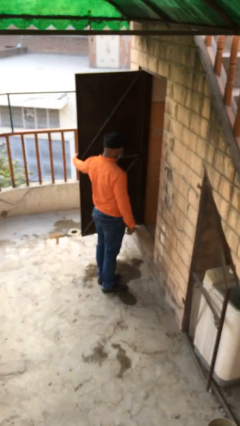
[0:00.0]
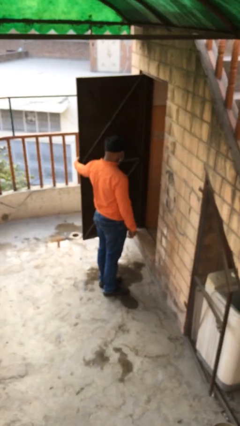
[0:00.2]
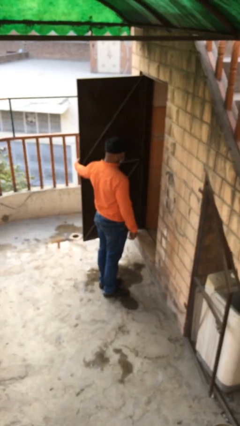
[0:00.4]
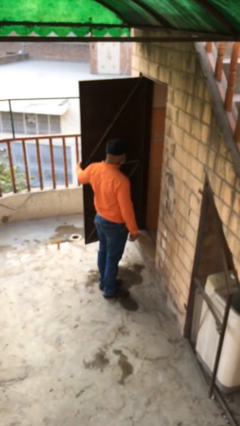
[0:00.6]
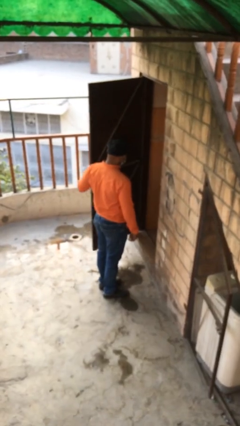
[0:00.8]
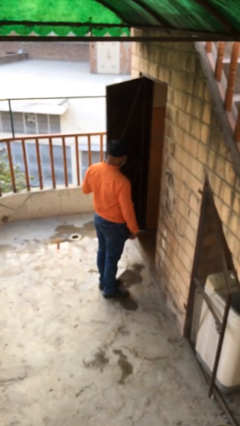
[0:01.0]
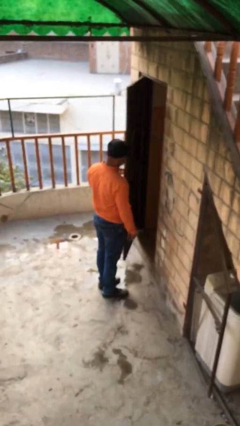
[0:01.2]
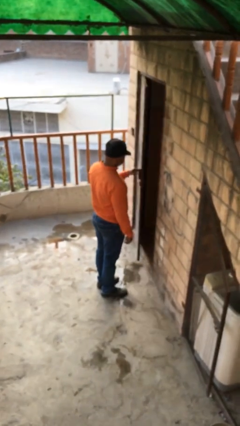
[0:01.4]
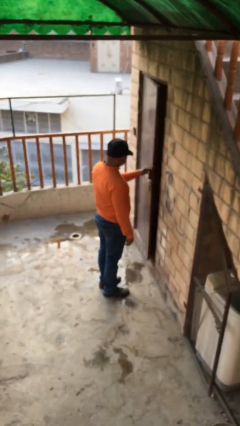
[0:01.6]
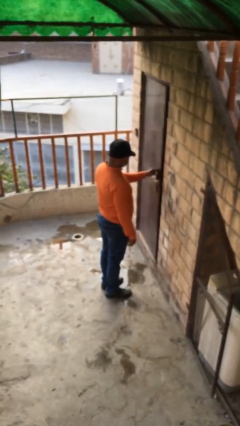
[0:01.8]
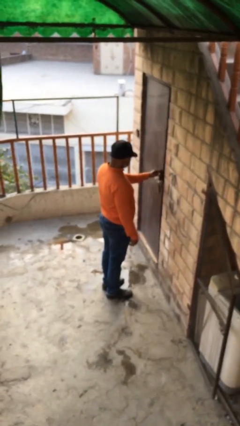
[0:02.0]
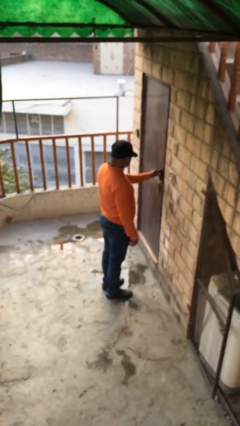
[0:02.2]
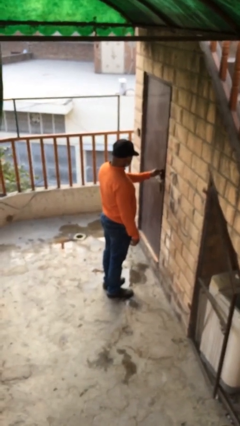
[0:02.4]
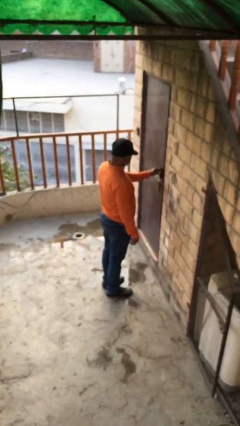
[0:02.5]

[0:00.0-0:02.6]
person closes facility door

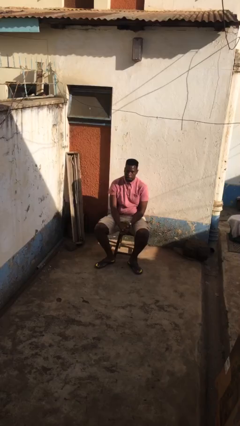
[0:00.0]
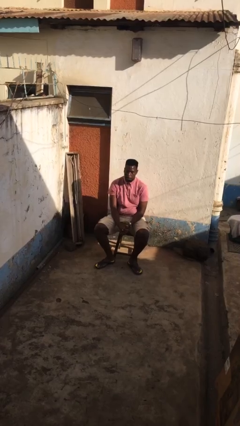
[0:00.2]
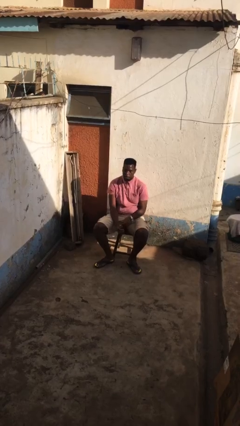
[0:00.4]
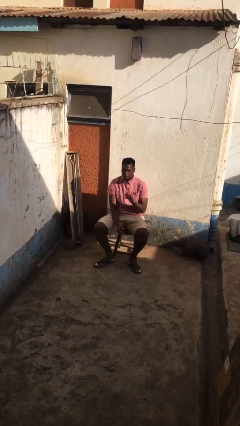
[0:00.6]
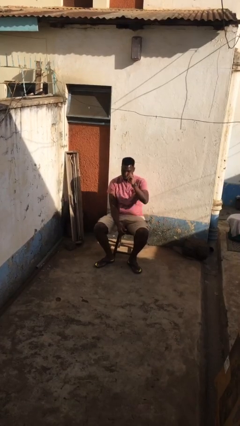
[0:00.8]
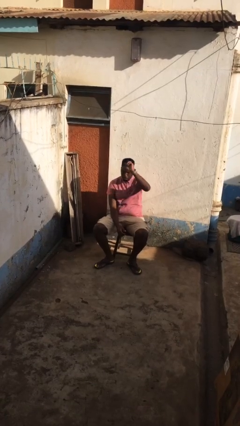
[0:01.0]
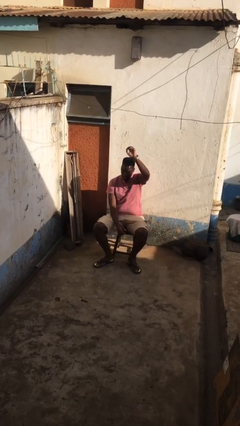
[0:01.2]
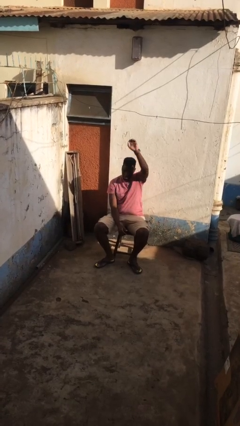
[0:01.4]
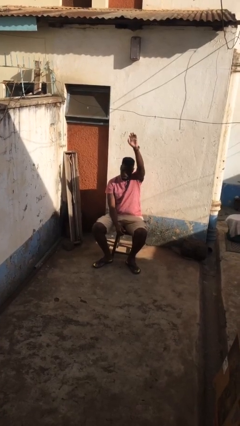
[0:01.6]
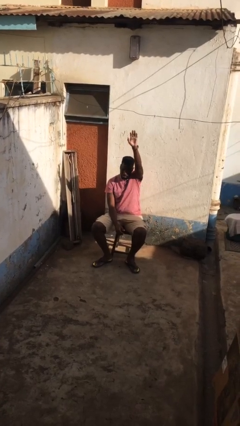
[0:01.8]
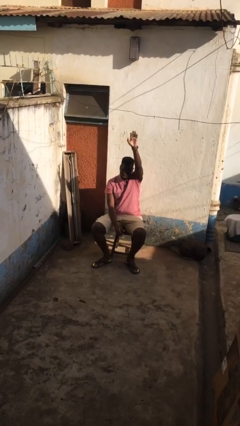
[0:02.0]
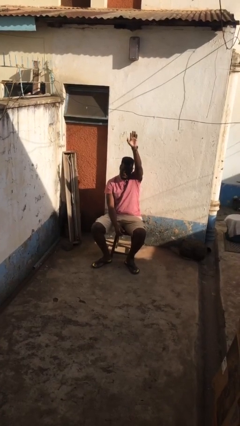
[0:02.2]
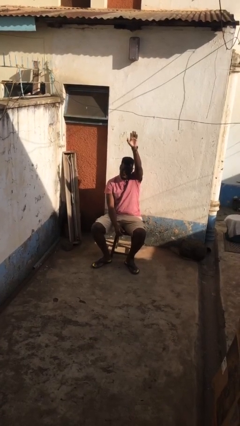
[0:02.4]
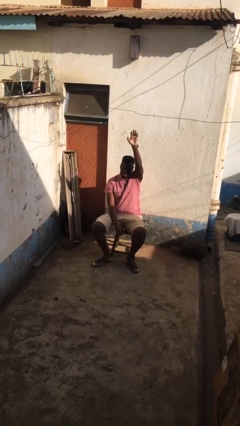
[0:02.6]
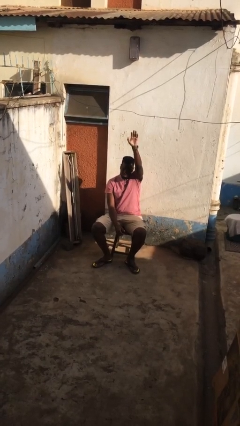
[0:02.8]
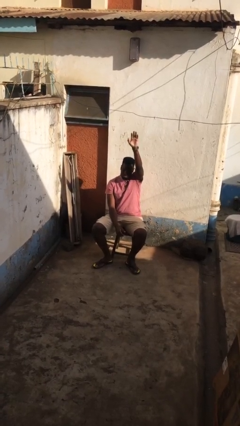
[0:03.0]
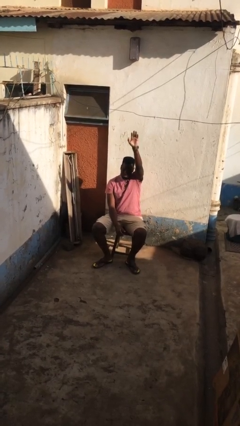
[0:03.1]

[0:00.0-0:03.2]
person gestures raise hand

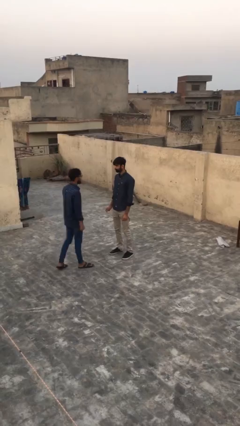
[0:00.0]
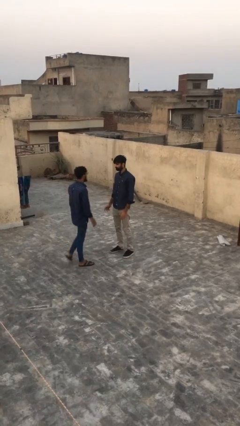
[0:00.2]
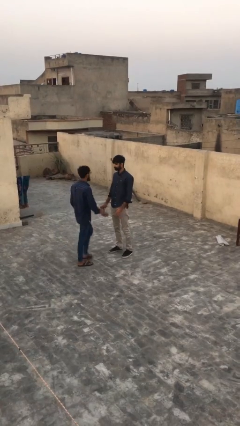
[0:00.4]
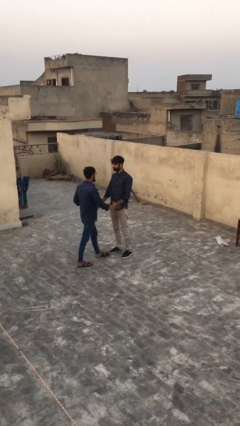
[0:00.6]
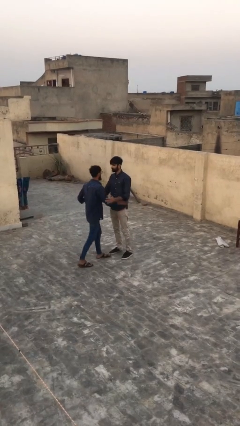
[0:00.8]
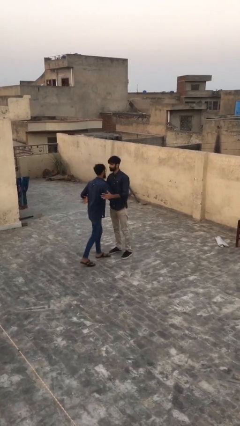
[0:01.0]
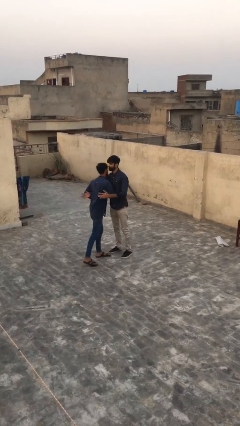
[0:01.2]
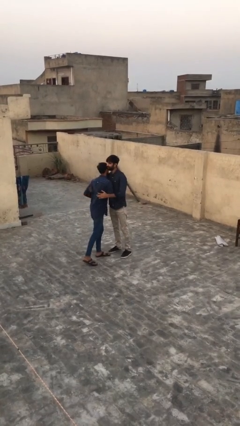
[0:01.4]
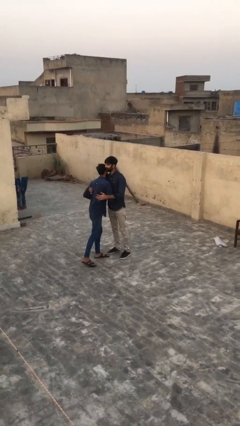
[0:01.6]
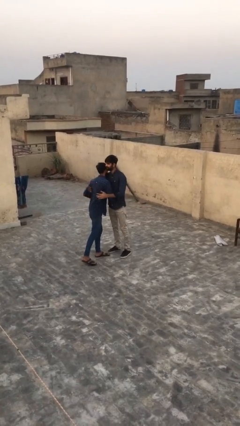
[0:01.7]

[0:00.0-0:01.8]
person embraces person

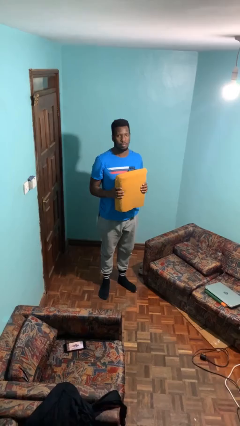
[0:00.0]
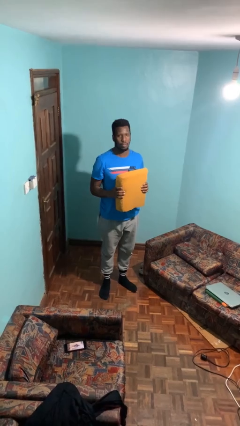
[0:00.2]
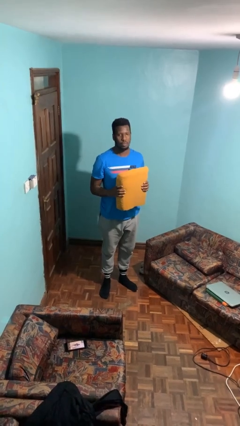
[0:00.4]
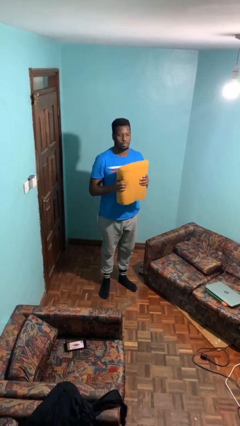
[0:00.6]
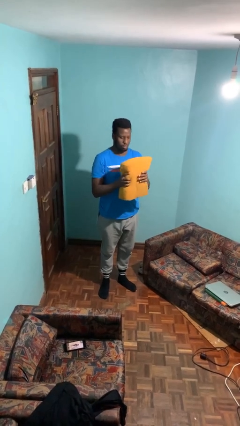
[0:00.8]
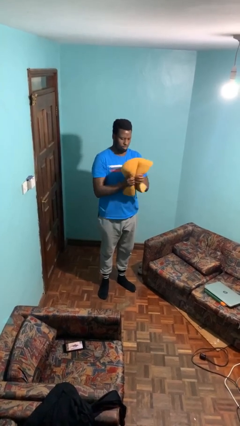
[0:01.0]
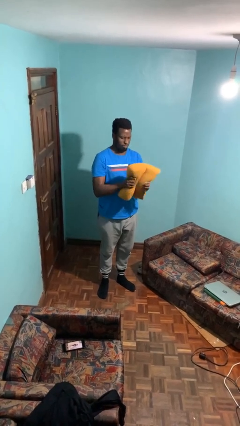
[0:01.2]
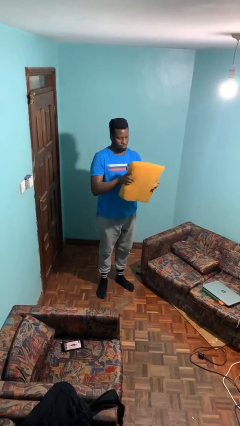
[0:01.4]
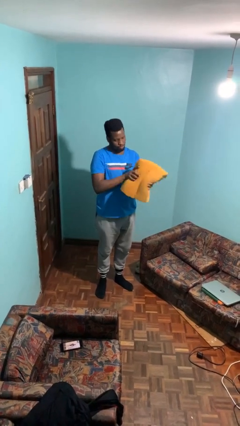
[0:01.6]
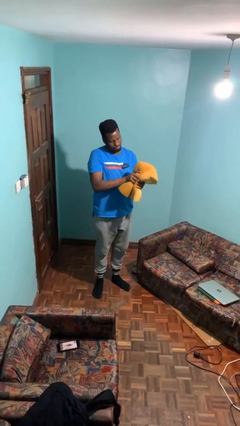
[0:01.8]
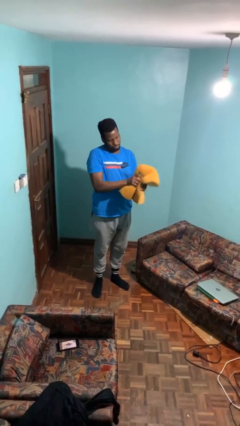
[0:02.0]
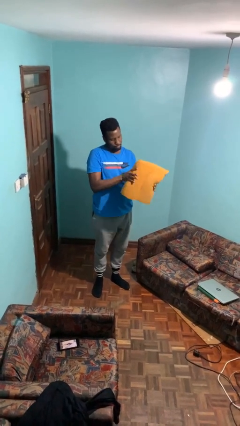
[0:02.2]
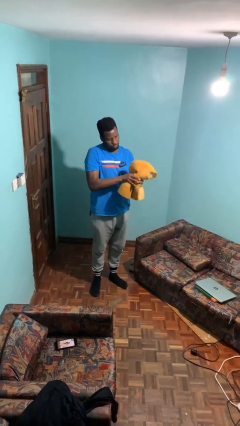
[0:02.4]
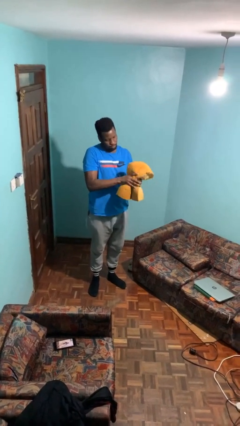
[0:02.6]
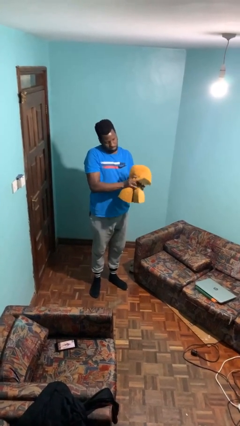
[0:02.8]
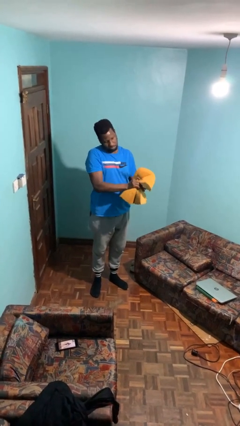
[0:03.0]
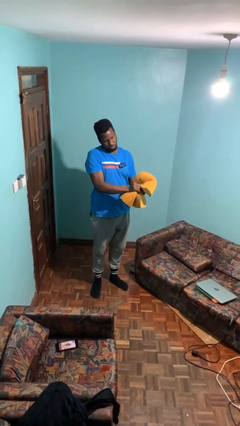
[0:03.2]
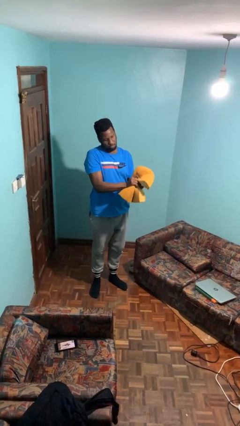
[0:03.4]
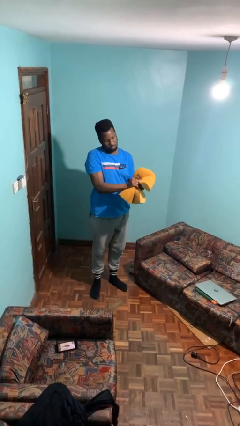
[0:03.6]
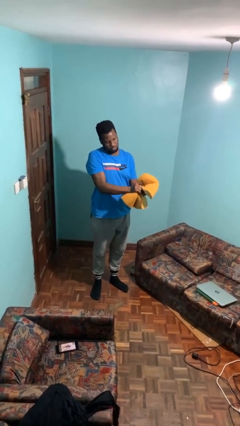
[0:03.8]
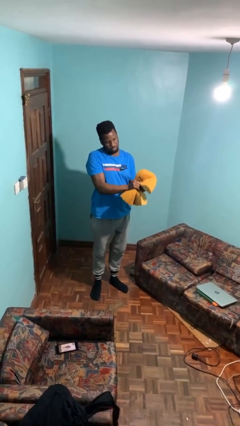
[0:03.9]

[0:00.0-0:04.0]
person squeezes object

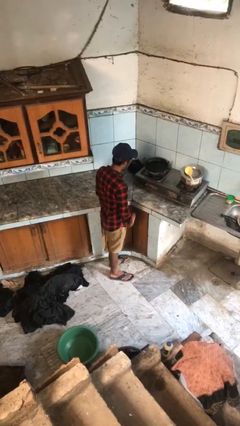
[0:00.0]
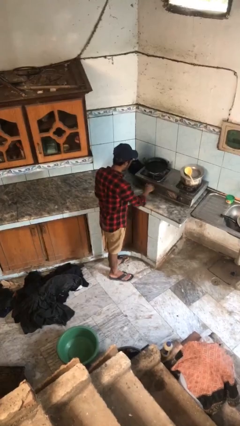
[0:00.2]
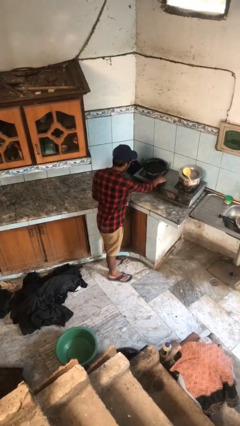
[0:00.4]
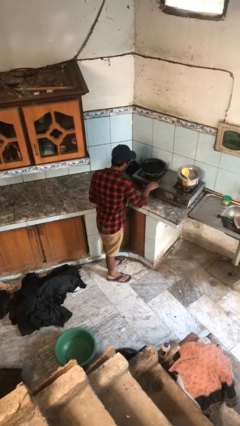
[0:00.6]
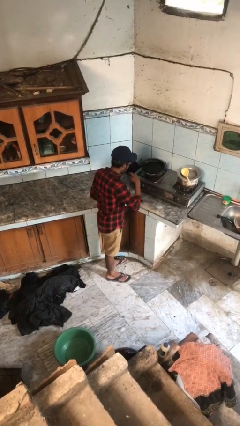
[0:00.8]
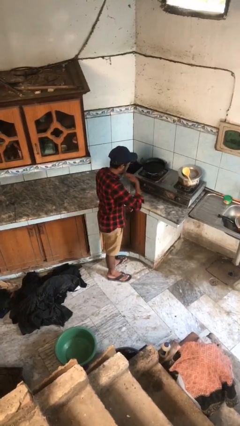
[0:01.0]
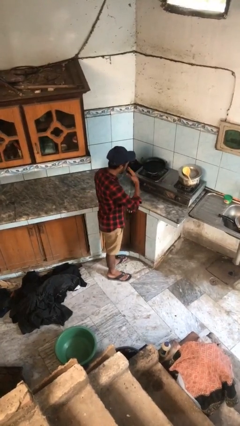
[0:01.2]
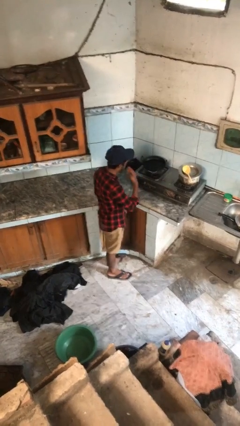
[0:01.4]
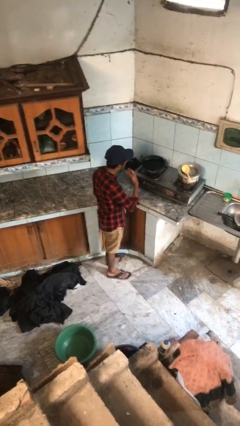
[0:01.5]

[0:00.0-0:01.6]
person burns hand

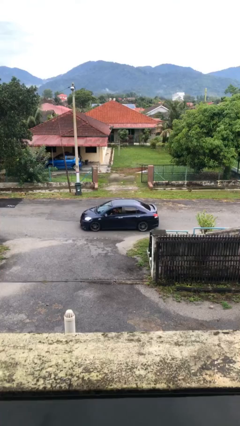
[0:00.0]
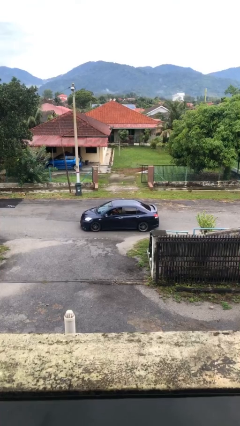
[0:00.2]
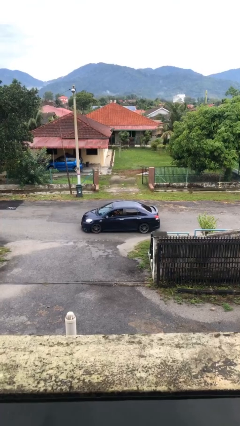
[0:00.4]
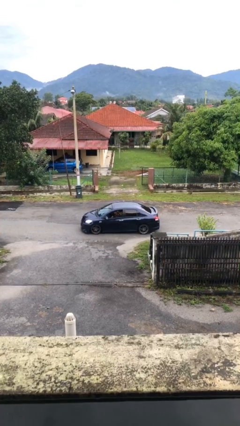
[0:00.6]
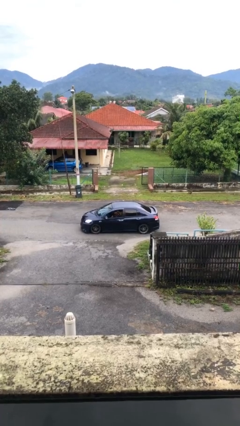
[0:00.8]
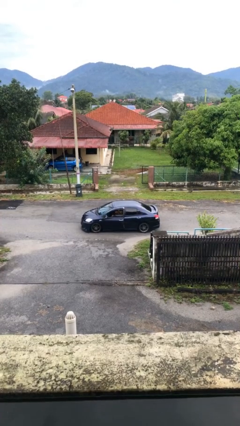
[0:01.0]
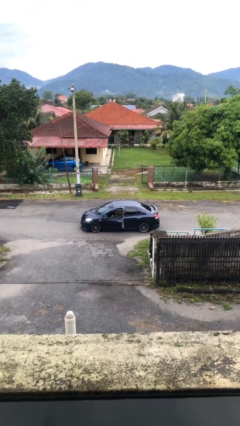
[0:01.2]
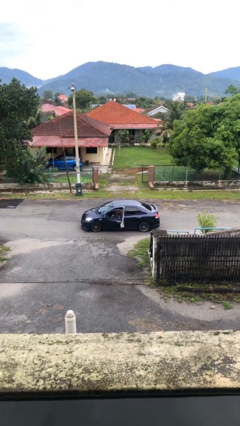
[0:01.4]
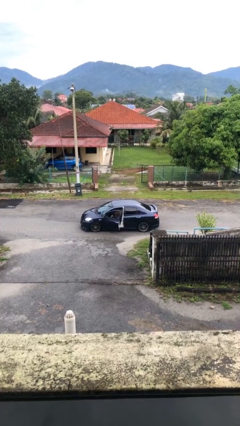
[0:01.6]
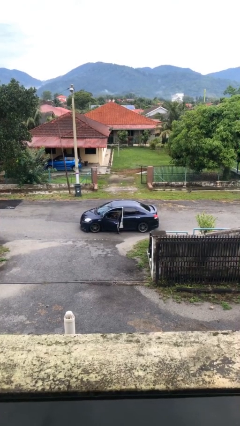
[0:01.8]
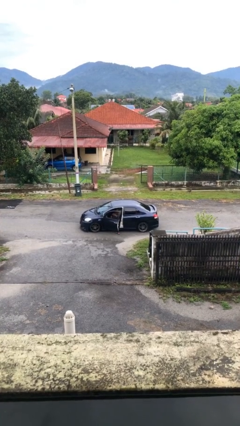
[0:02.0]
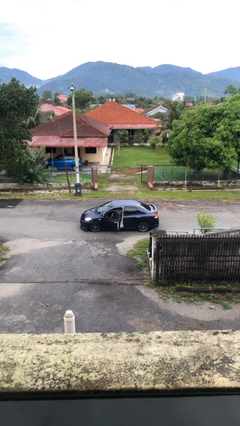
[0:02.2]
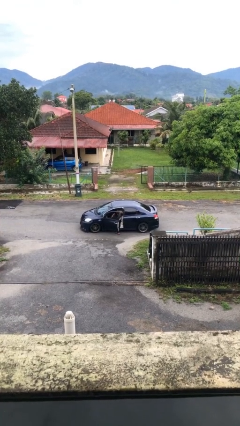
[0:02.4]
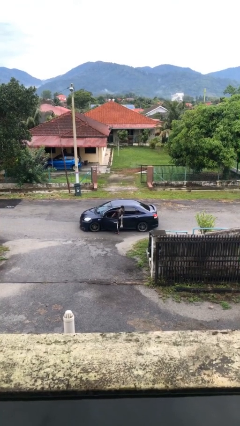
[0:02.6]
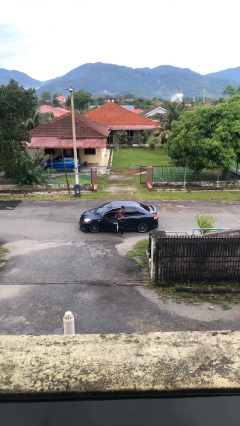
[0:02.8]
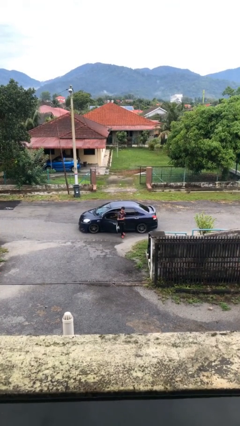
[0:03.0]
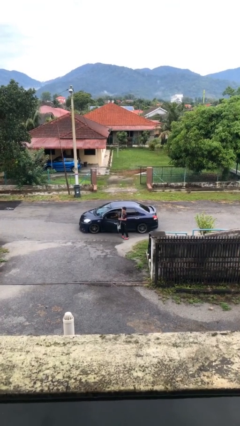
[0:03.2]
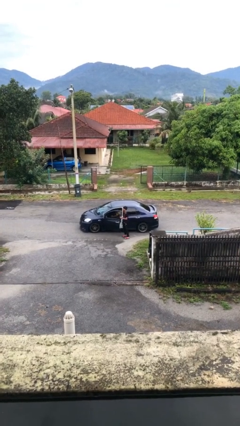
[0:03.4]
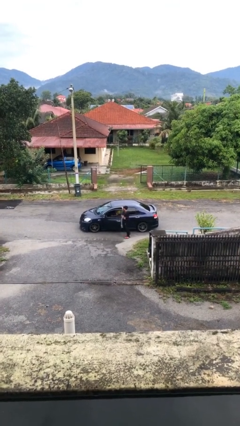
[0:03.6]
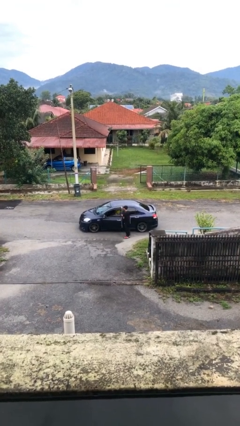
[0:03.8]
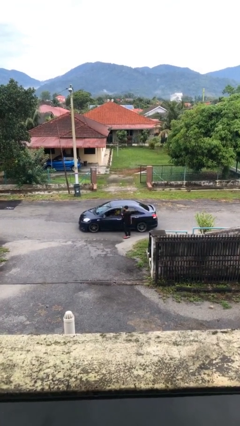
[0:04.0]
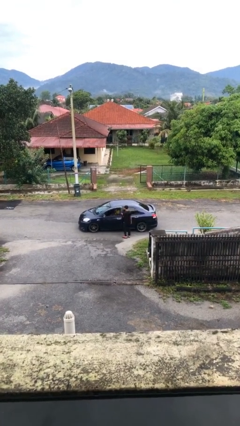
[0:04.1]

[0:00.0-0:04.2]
car drops off person
